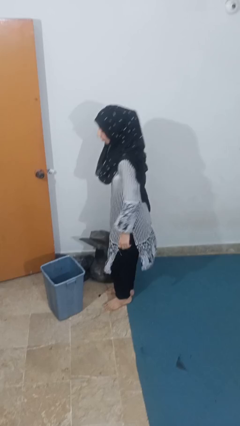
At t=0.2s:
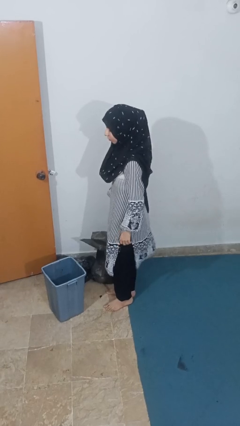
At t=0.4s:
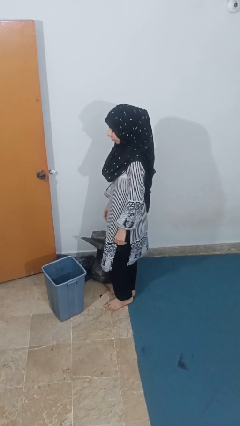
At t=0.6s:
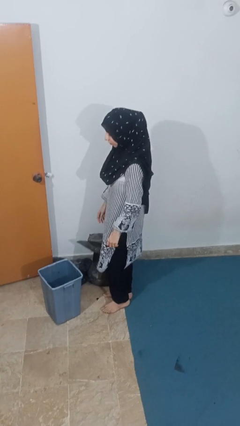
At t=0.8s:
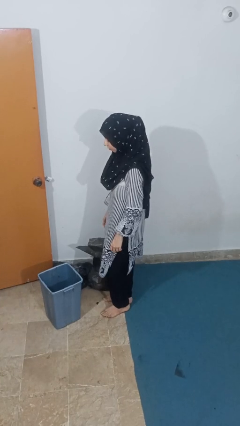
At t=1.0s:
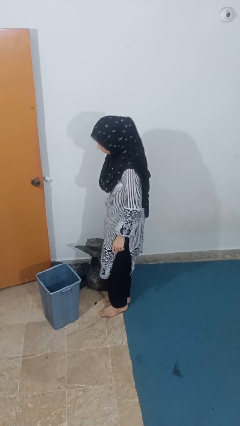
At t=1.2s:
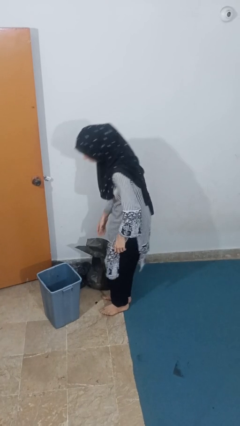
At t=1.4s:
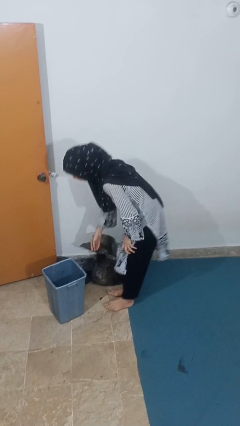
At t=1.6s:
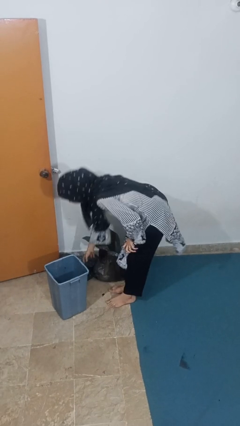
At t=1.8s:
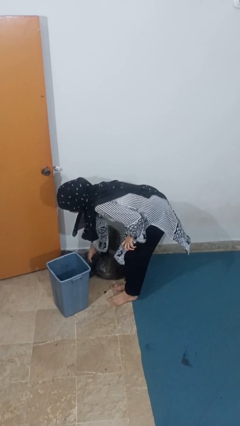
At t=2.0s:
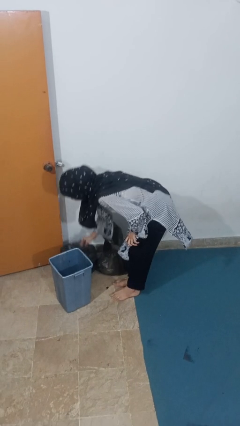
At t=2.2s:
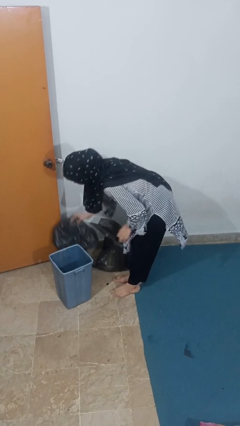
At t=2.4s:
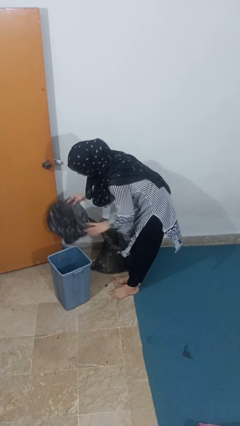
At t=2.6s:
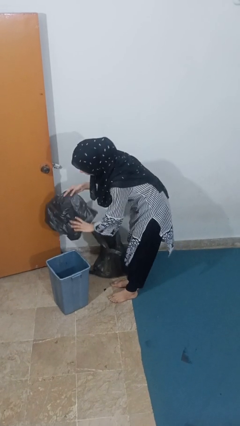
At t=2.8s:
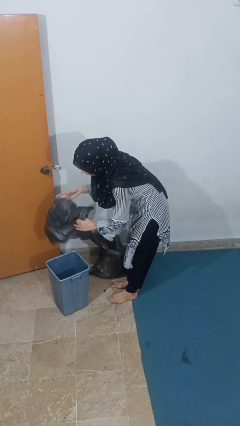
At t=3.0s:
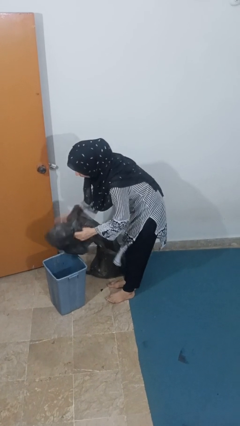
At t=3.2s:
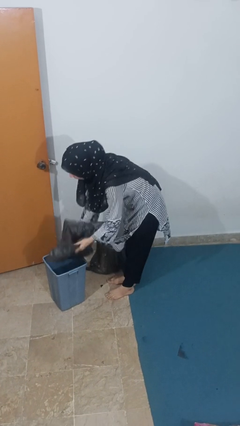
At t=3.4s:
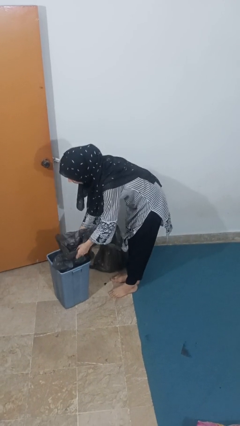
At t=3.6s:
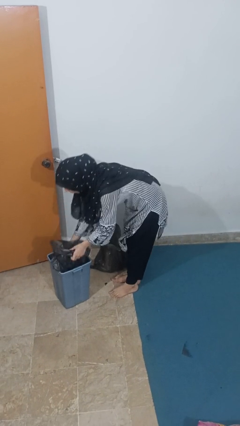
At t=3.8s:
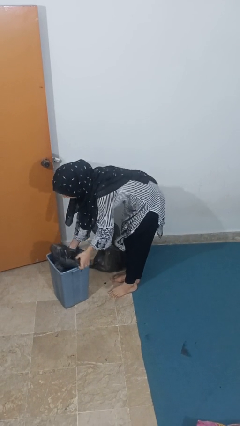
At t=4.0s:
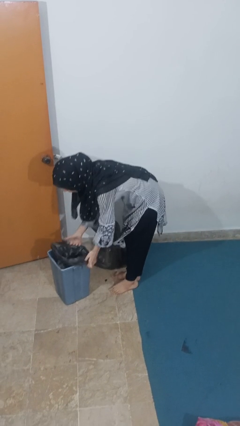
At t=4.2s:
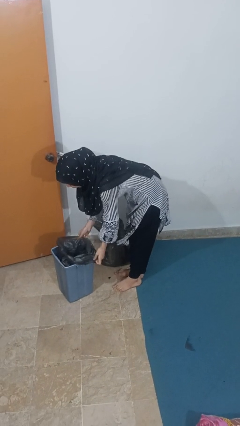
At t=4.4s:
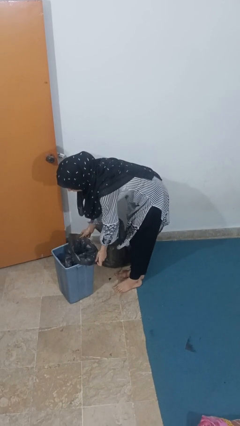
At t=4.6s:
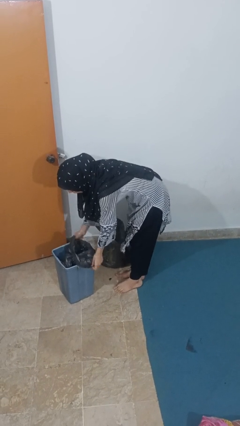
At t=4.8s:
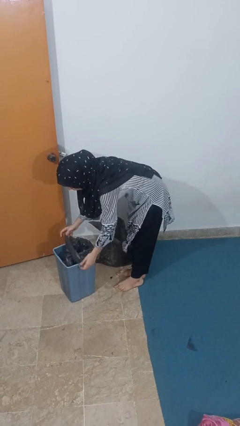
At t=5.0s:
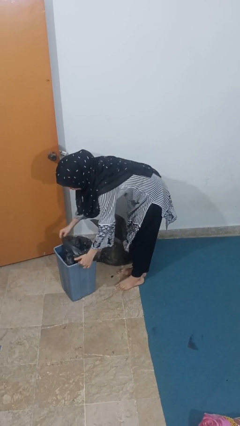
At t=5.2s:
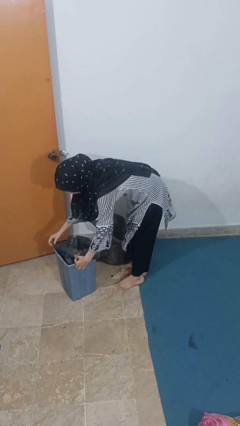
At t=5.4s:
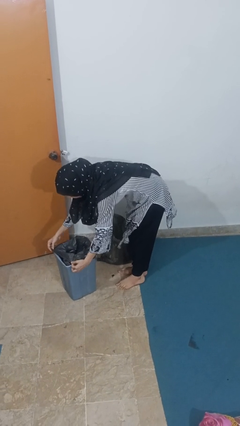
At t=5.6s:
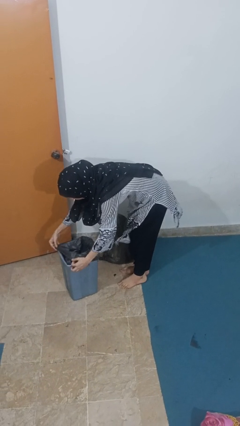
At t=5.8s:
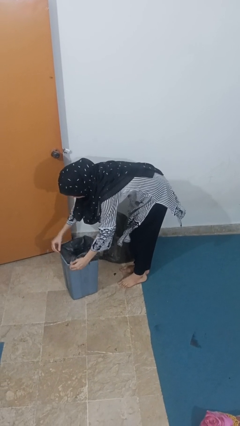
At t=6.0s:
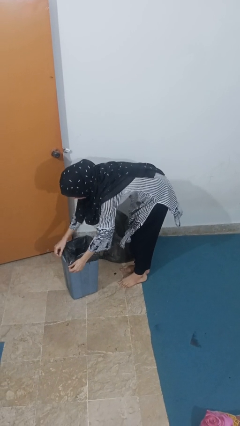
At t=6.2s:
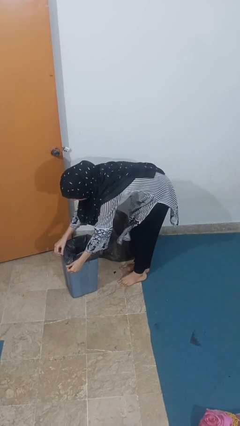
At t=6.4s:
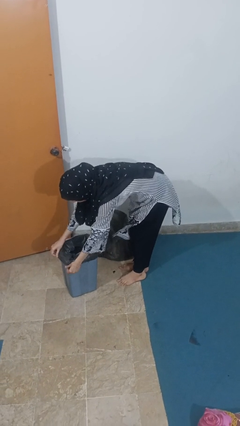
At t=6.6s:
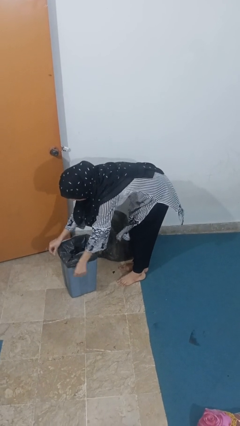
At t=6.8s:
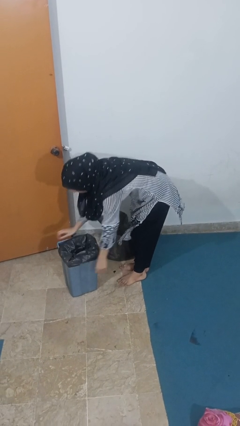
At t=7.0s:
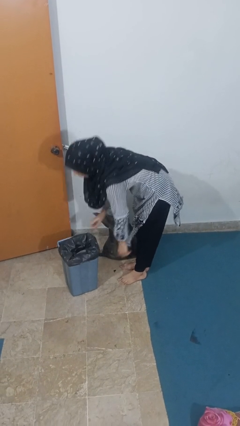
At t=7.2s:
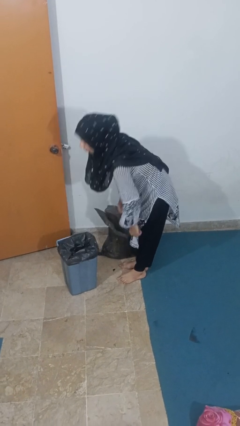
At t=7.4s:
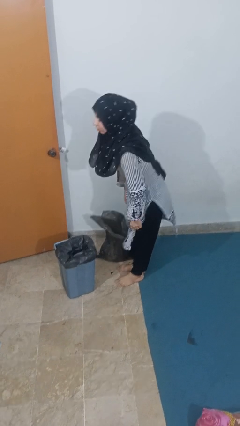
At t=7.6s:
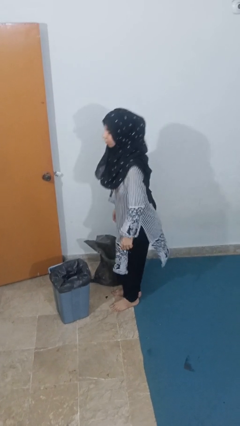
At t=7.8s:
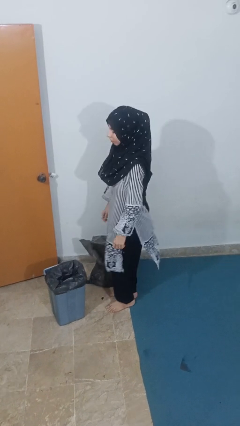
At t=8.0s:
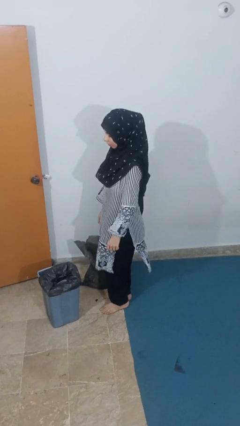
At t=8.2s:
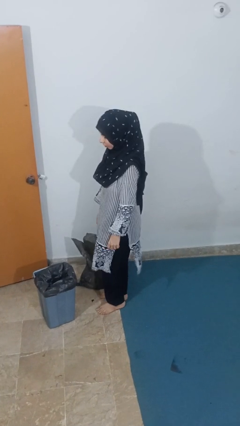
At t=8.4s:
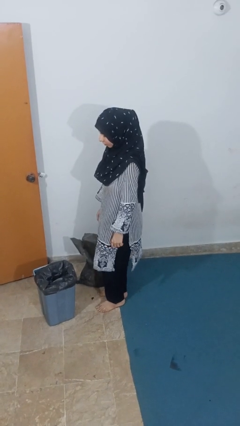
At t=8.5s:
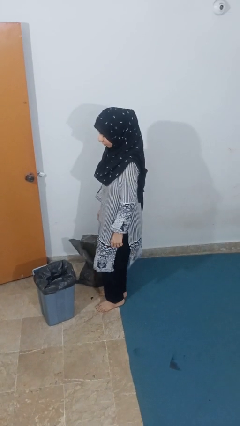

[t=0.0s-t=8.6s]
person inserts trashbag into trashcan

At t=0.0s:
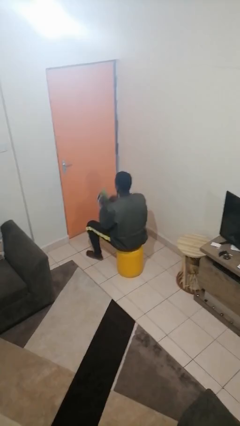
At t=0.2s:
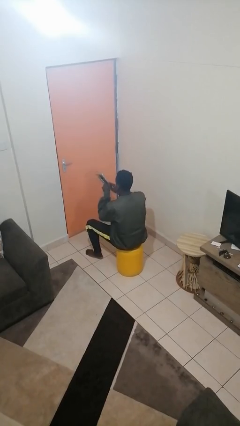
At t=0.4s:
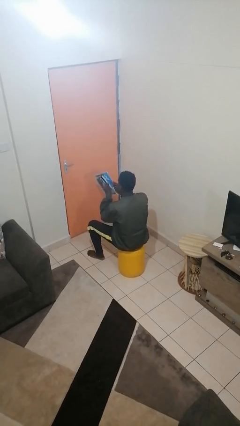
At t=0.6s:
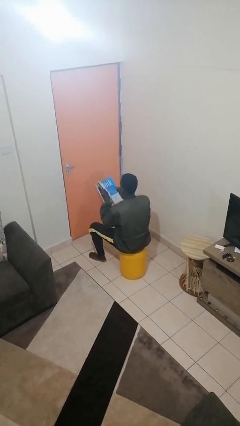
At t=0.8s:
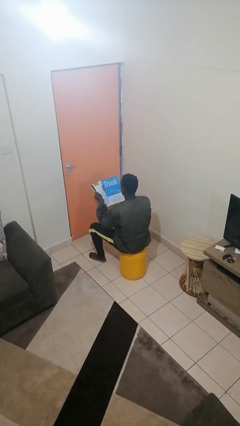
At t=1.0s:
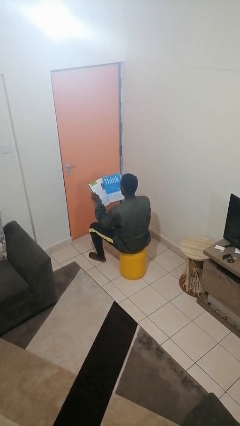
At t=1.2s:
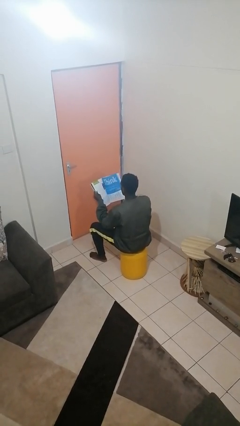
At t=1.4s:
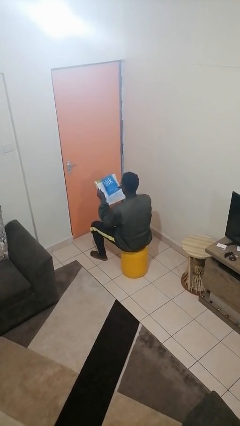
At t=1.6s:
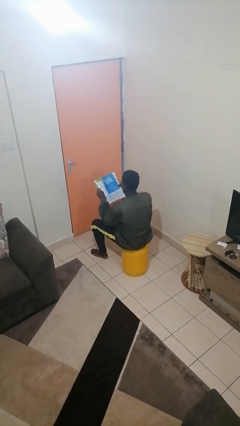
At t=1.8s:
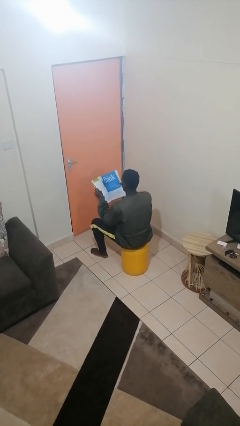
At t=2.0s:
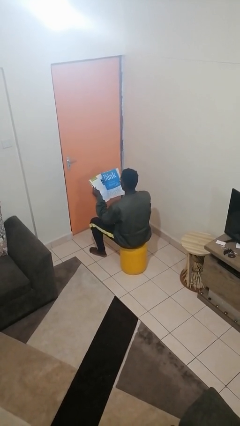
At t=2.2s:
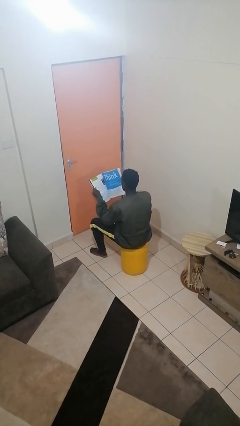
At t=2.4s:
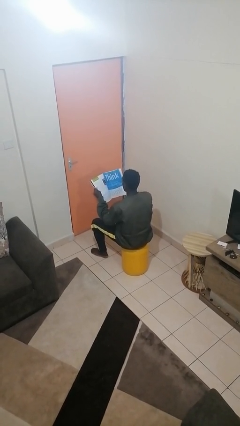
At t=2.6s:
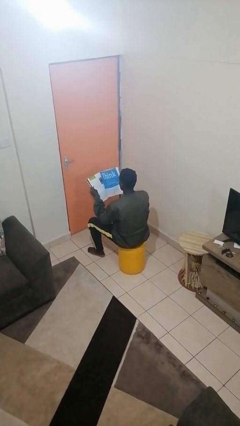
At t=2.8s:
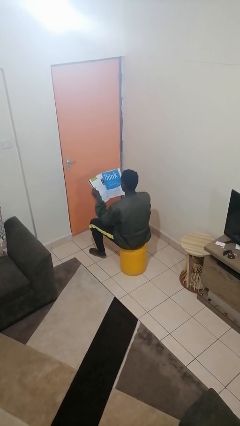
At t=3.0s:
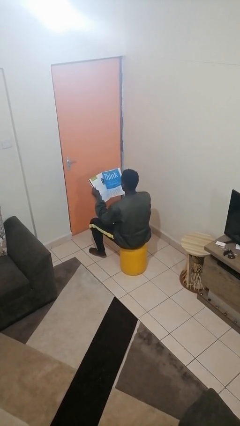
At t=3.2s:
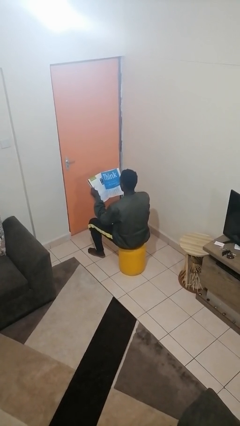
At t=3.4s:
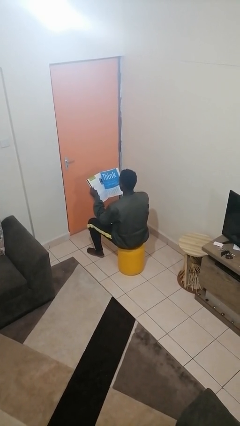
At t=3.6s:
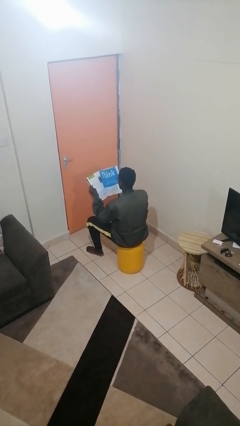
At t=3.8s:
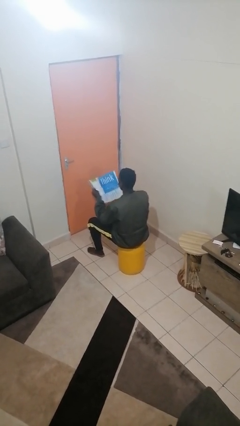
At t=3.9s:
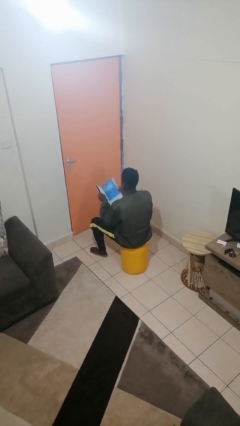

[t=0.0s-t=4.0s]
person reads magazine

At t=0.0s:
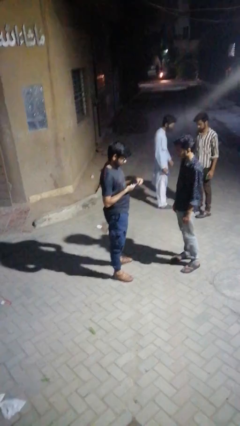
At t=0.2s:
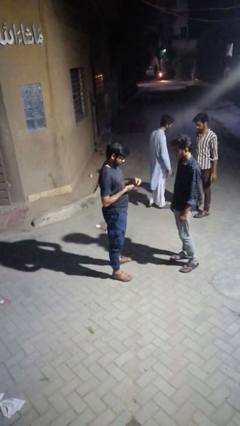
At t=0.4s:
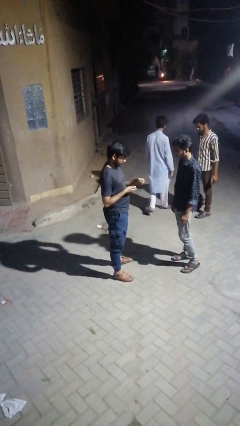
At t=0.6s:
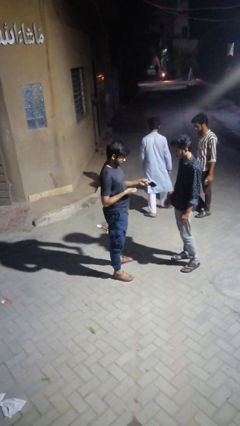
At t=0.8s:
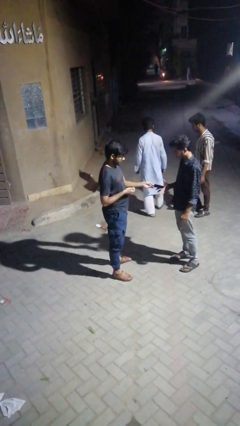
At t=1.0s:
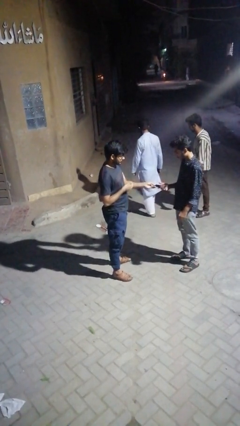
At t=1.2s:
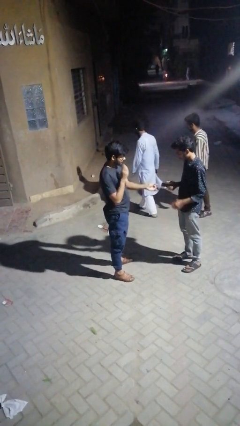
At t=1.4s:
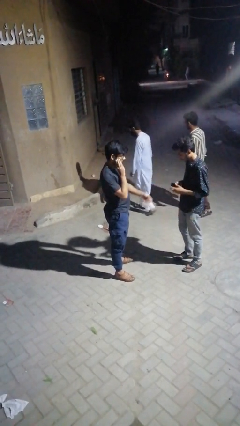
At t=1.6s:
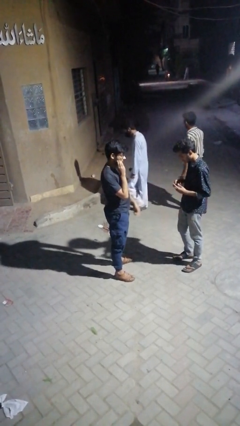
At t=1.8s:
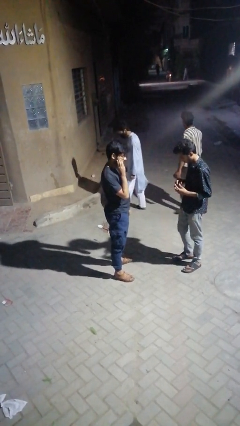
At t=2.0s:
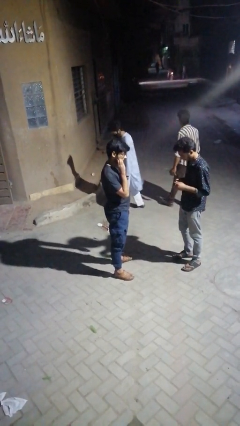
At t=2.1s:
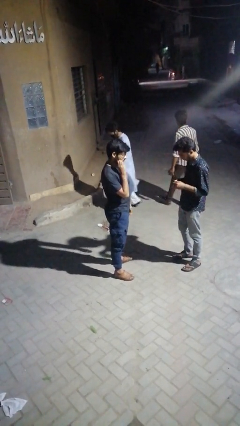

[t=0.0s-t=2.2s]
person transfers object to person

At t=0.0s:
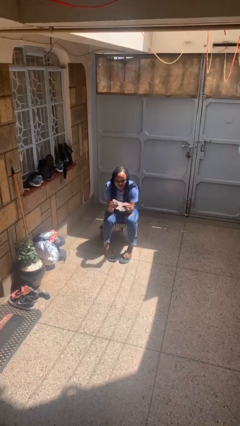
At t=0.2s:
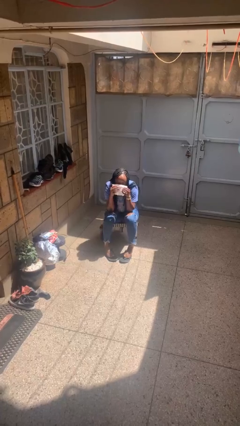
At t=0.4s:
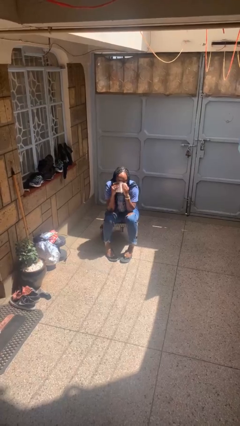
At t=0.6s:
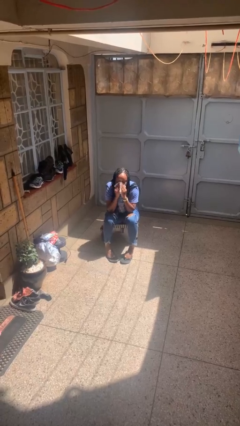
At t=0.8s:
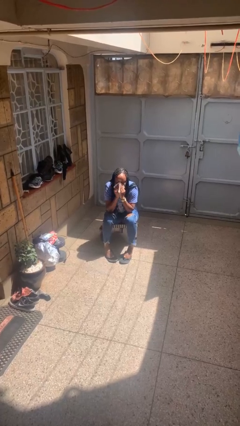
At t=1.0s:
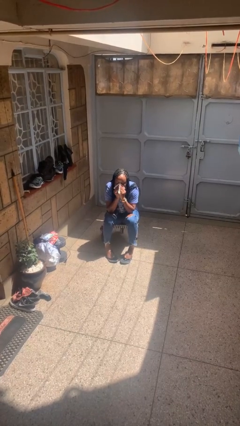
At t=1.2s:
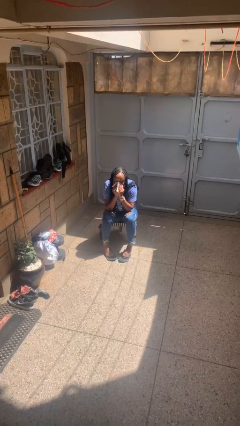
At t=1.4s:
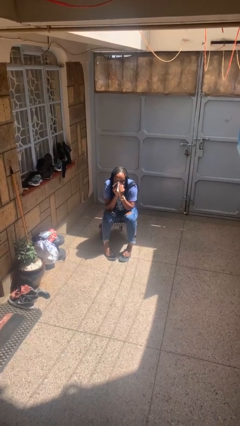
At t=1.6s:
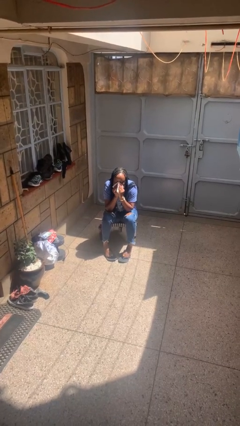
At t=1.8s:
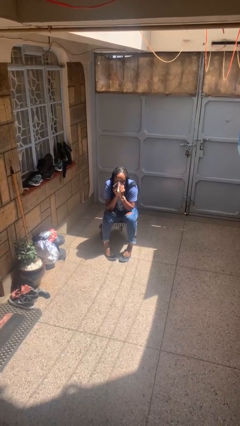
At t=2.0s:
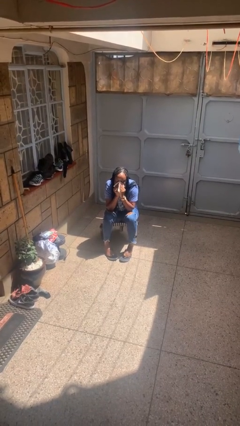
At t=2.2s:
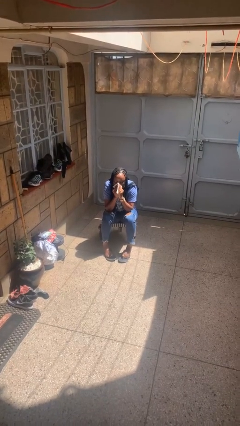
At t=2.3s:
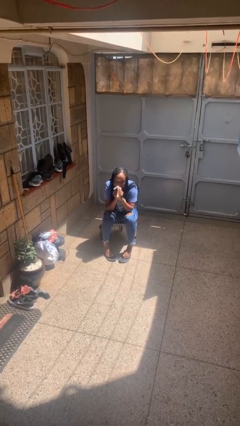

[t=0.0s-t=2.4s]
person blows nose

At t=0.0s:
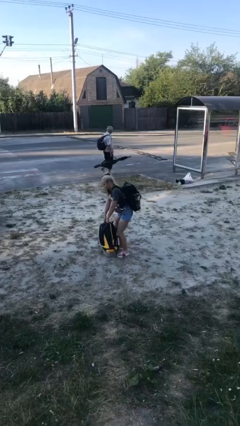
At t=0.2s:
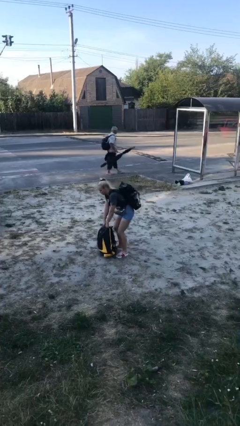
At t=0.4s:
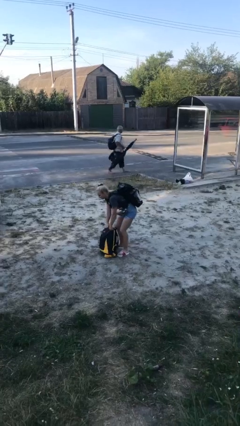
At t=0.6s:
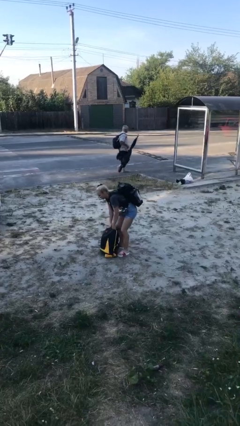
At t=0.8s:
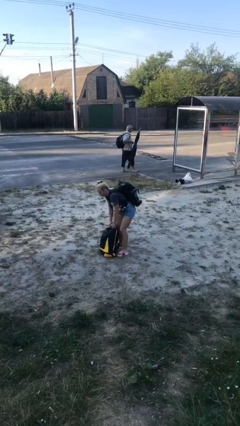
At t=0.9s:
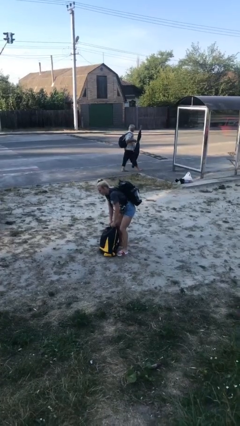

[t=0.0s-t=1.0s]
person puts down object on floor
